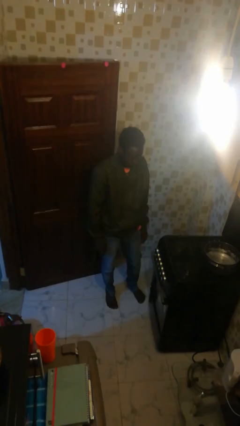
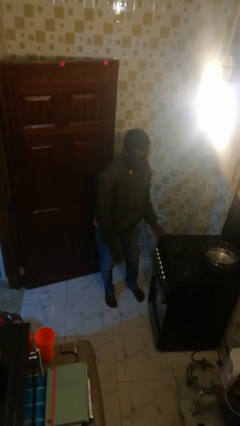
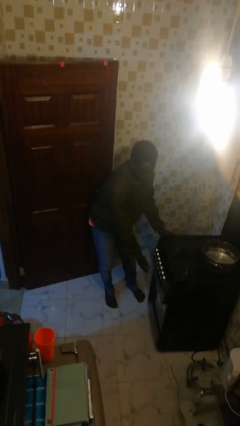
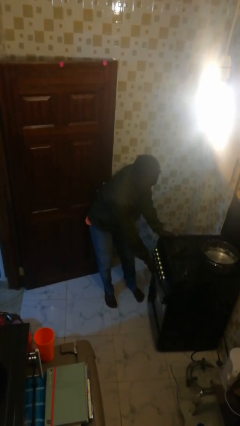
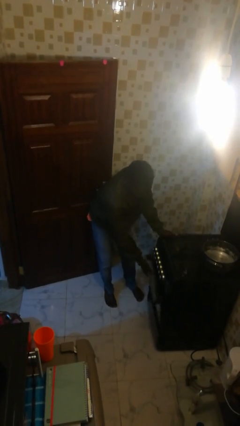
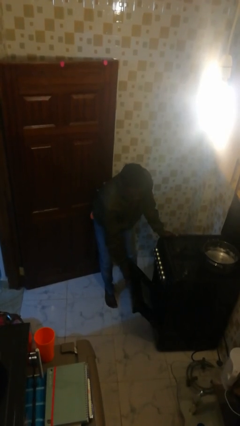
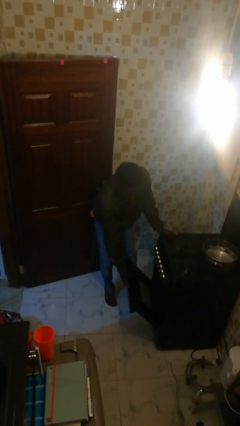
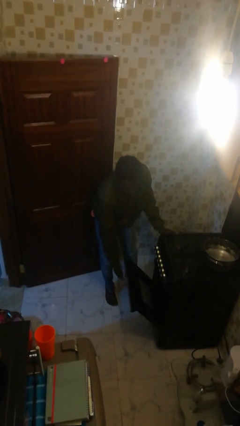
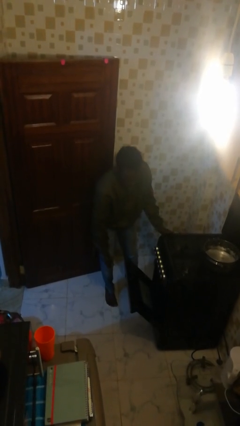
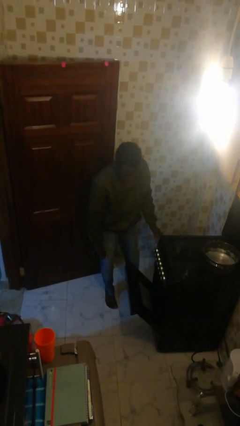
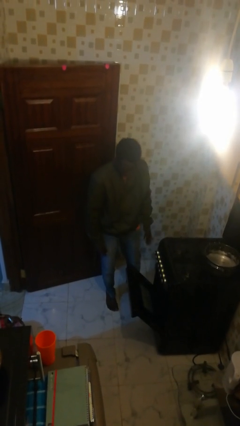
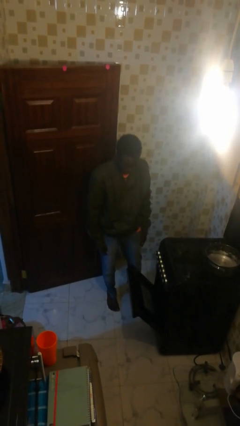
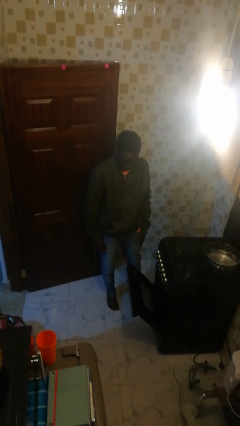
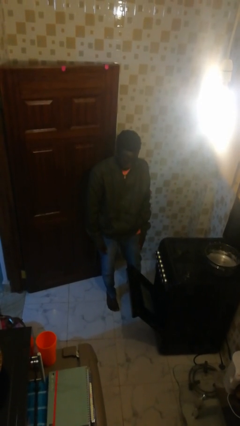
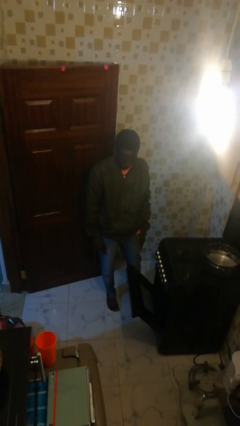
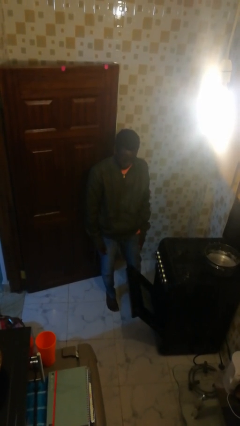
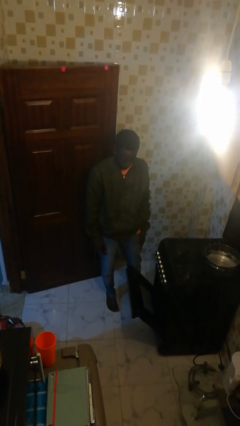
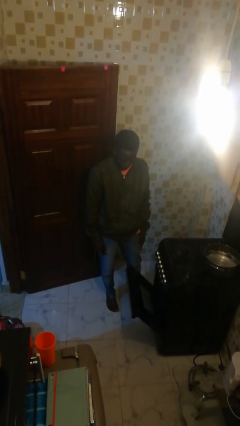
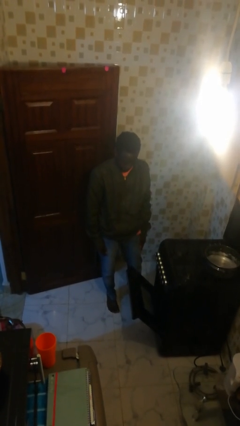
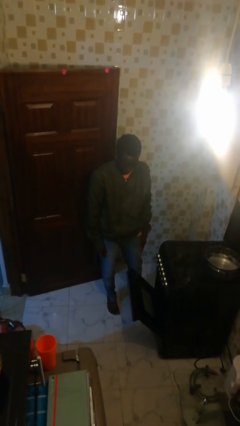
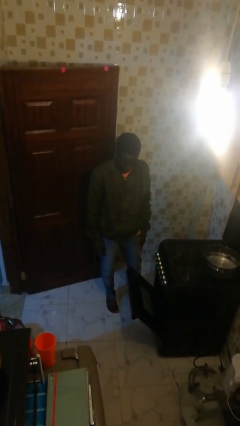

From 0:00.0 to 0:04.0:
person opens oven door

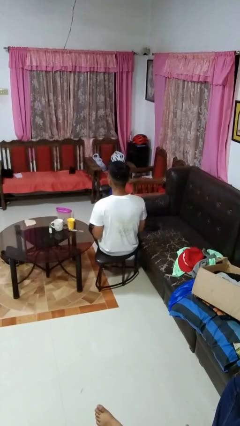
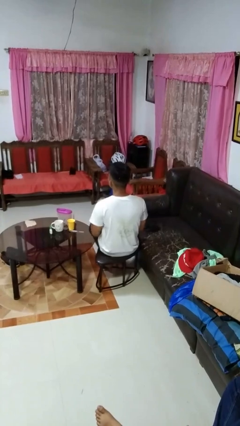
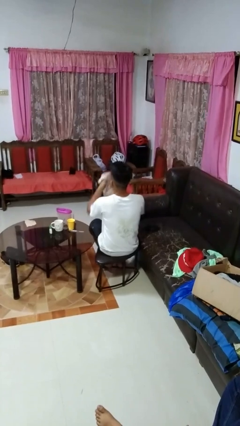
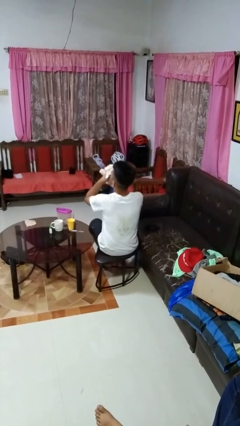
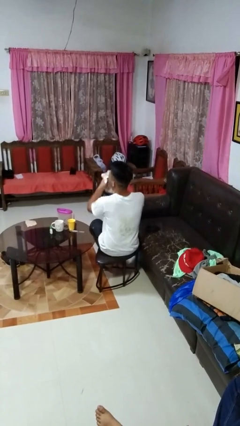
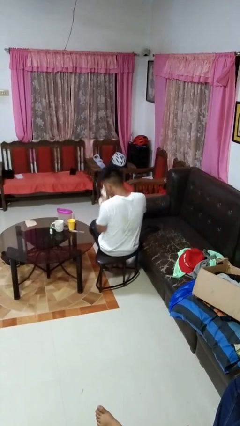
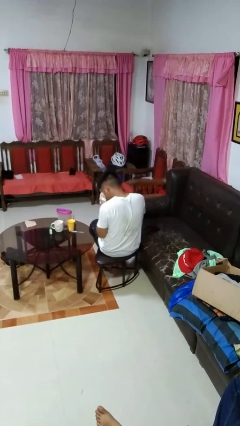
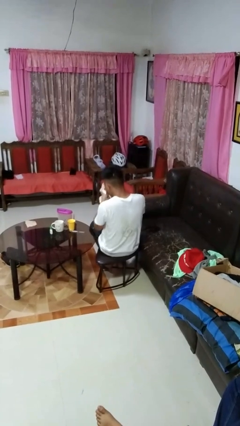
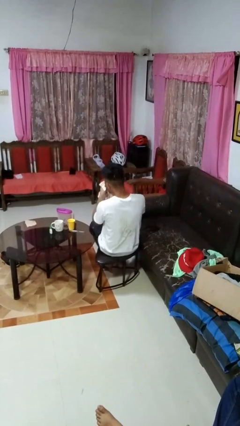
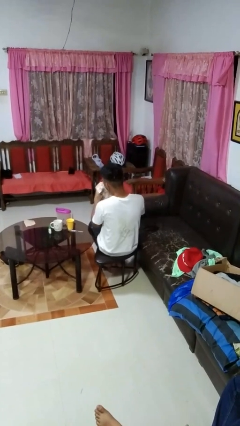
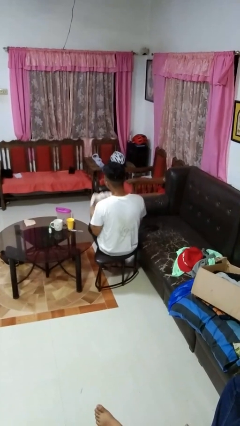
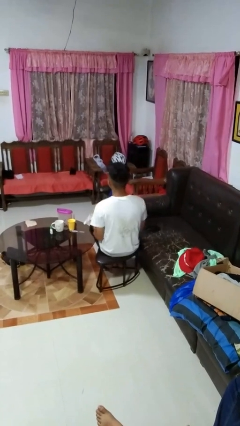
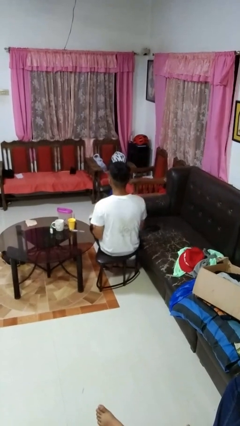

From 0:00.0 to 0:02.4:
person blows nose

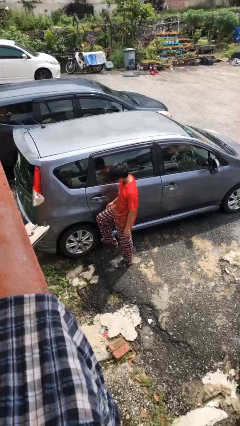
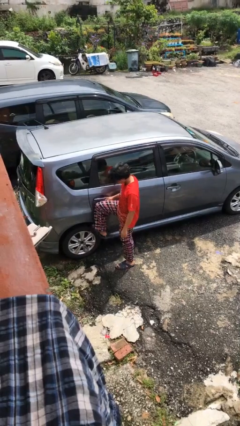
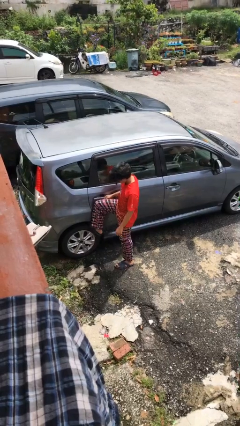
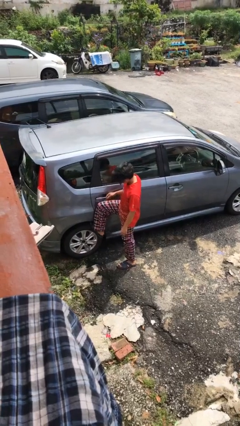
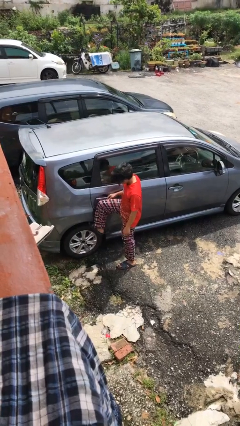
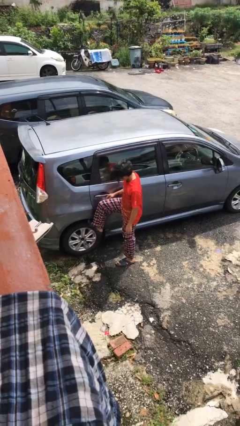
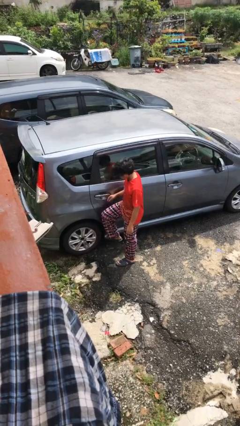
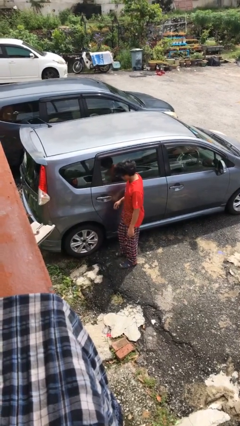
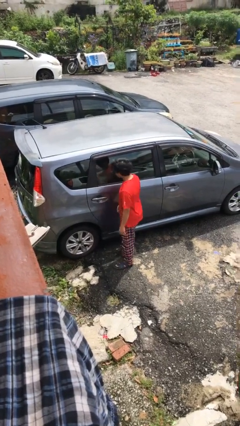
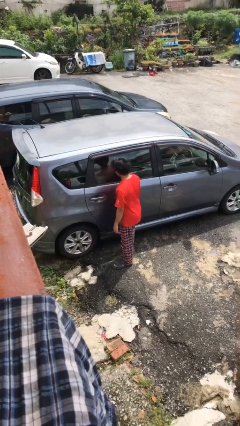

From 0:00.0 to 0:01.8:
person kicks car tires

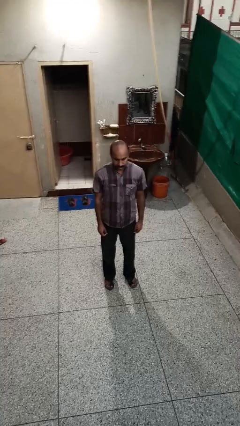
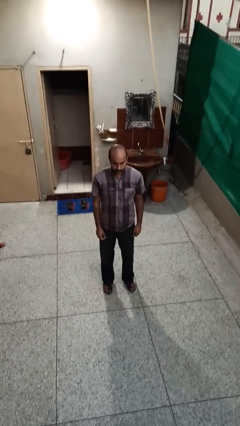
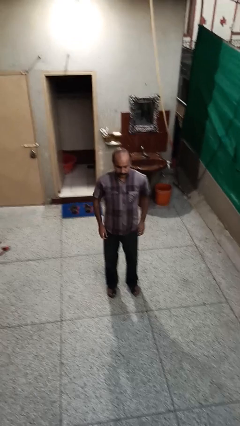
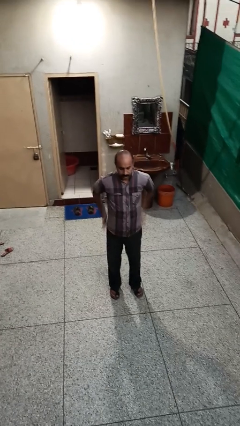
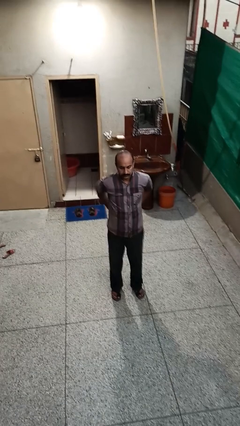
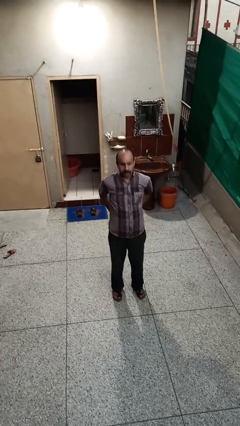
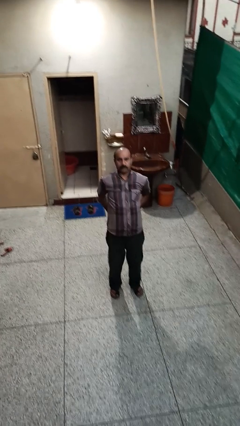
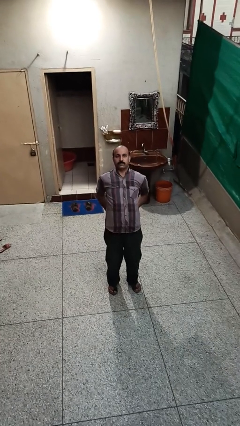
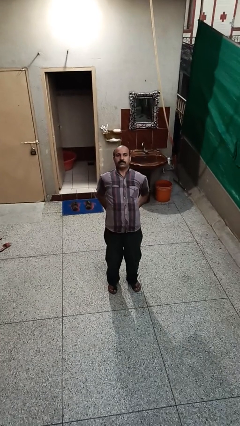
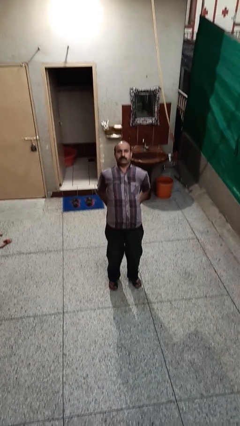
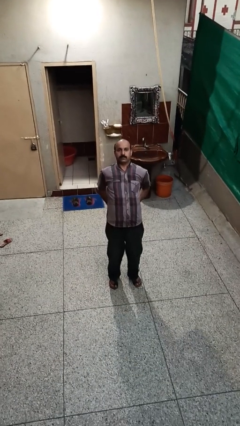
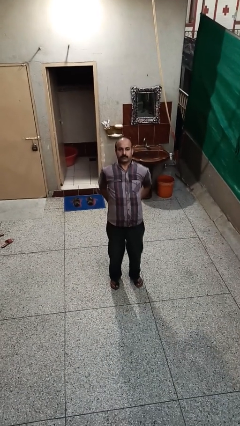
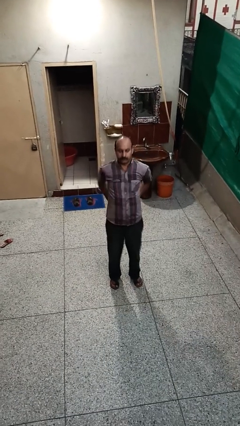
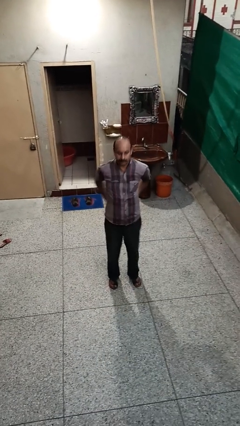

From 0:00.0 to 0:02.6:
person stretches back

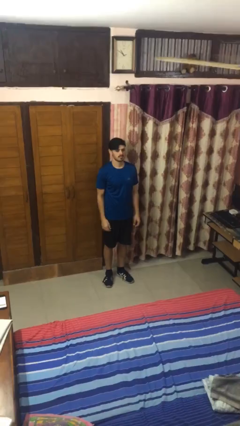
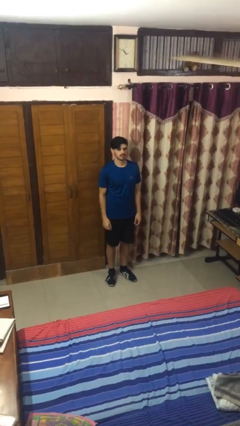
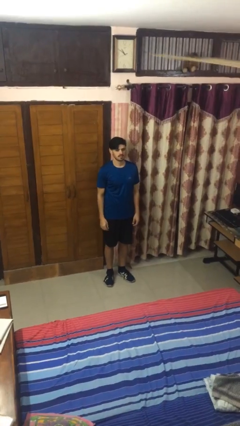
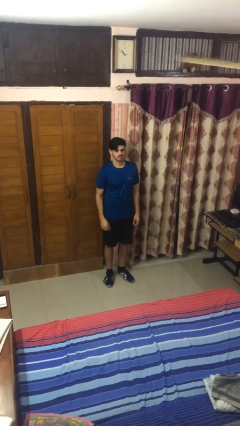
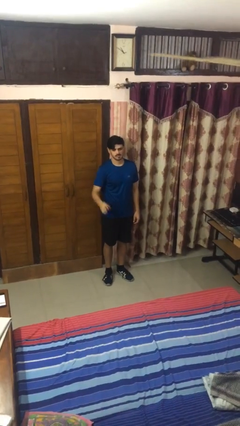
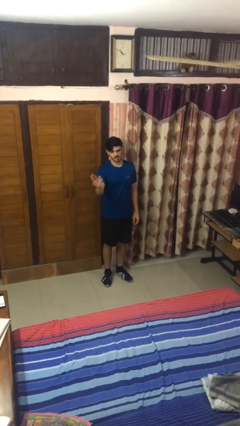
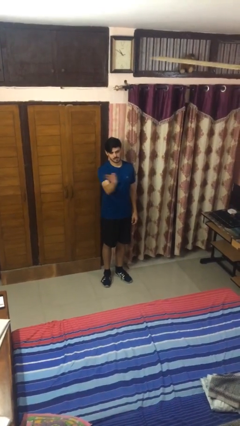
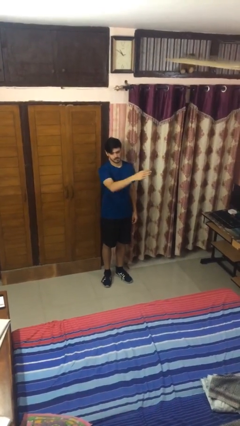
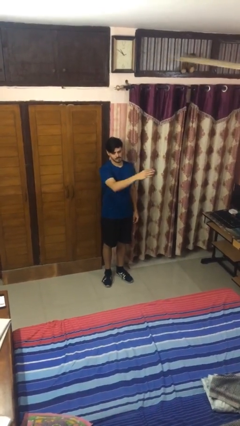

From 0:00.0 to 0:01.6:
person gestures swipe left

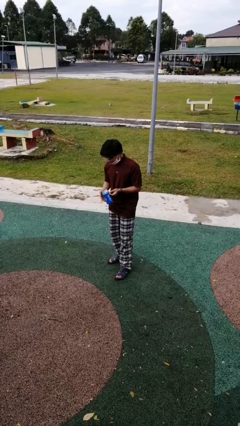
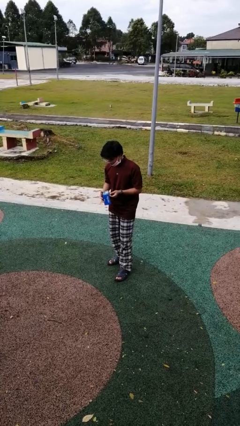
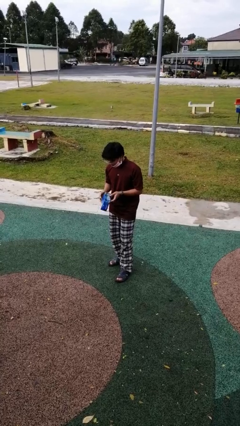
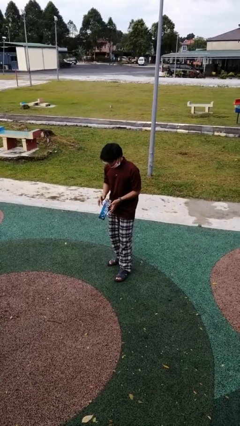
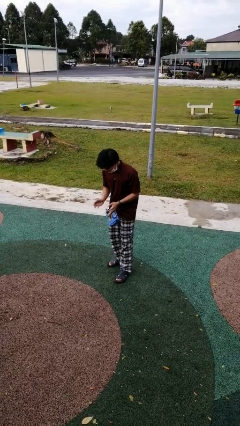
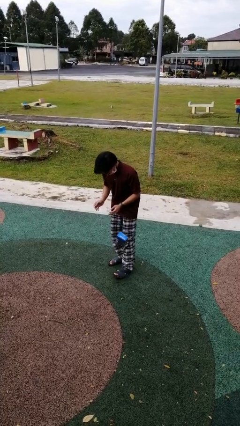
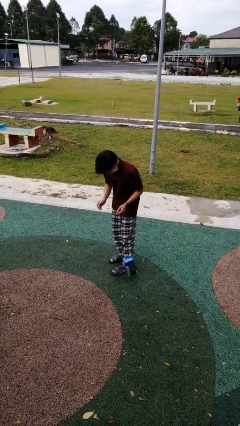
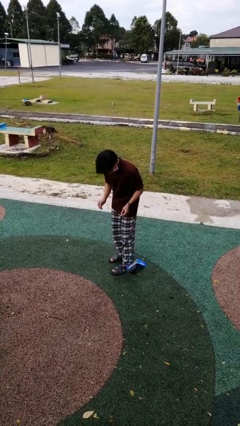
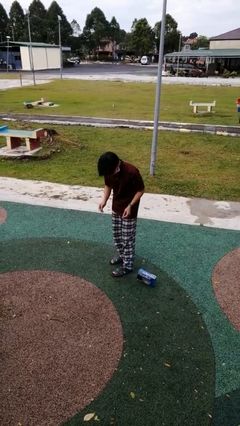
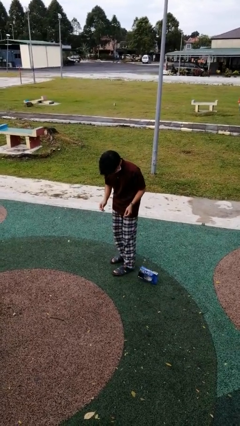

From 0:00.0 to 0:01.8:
person drops object

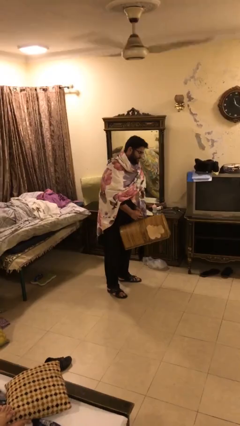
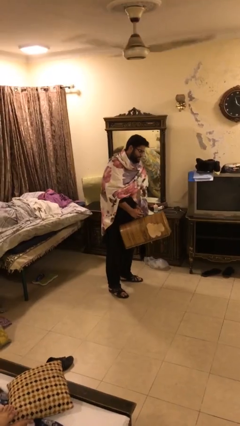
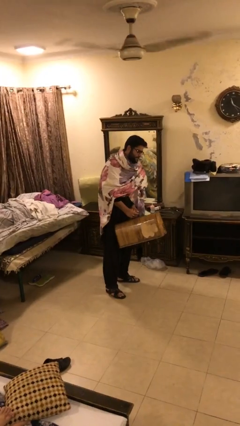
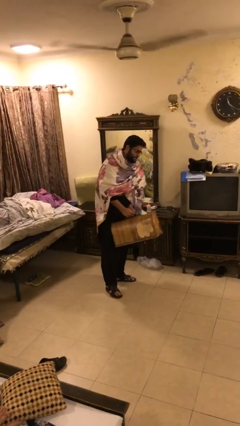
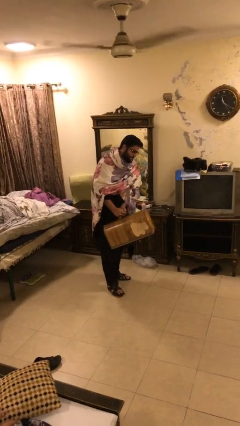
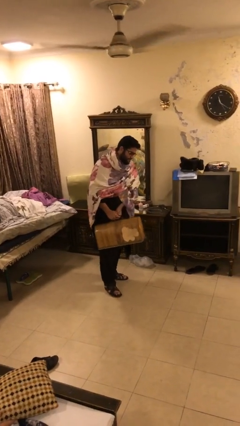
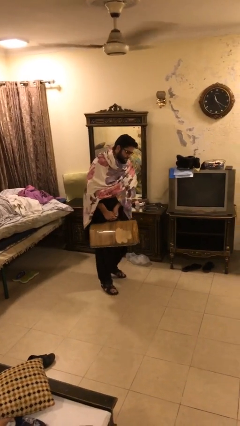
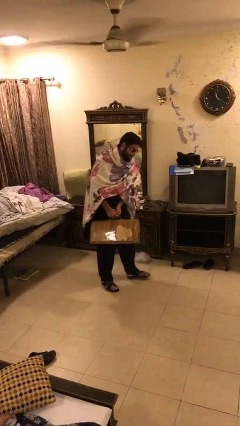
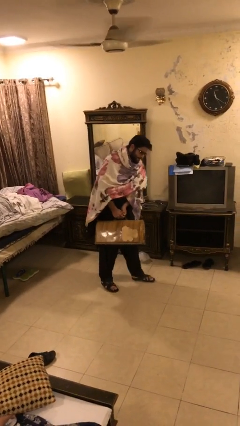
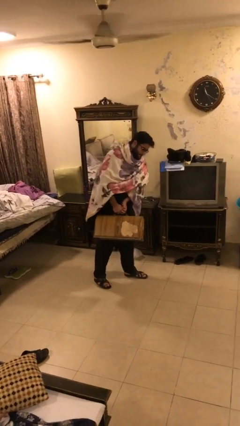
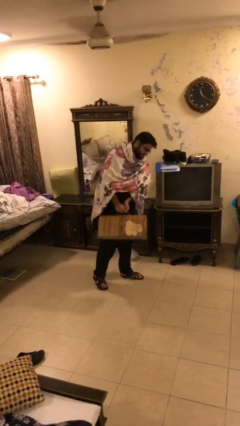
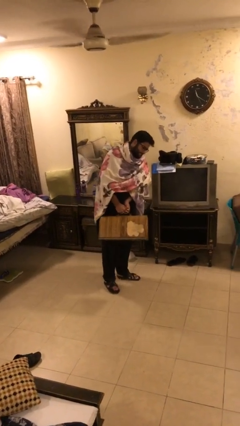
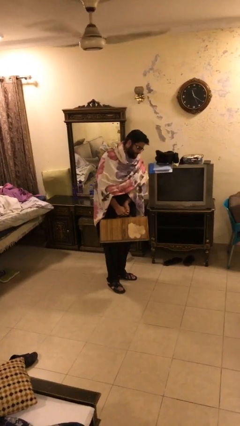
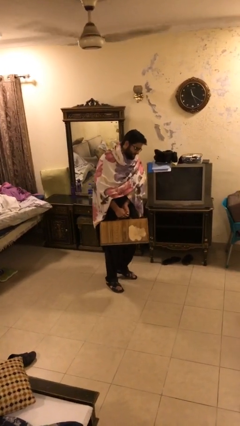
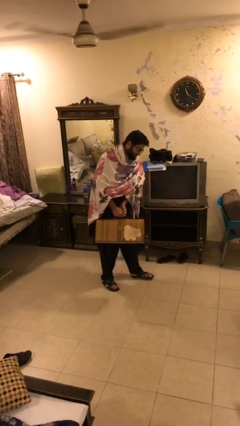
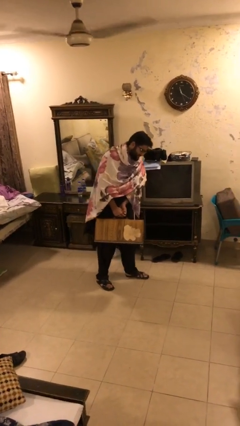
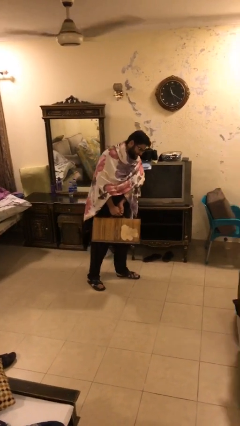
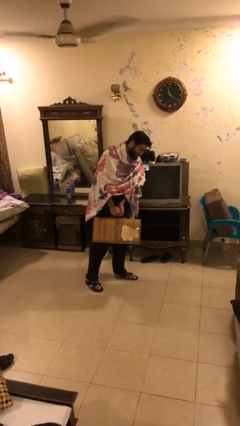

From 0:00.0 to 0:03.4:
person carries heavy object
